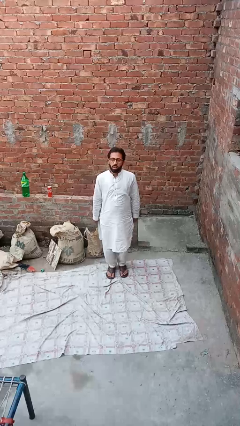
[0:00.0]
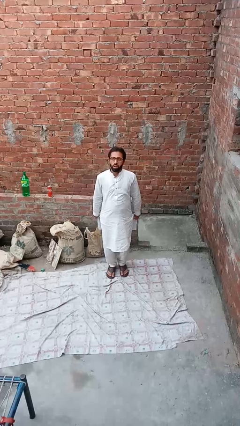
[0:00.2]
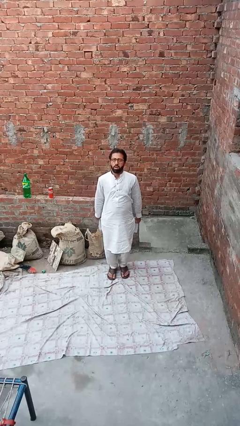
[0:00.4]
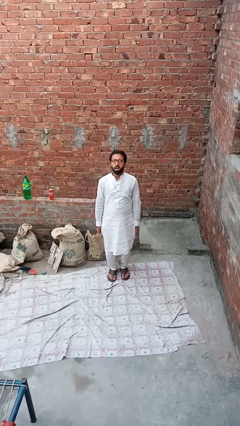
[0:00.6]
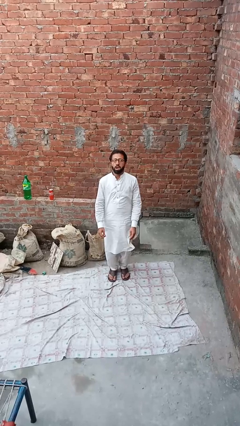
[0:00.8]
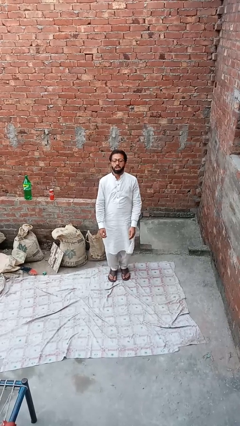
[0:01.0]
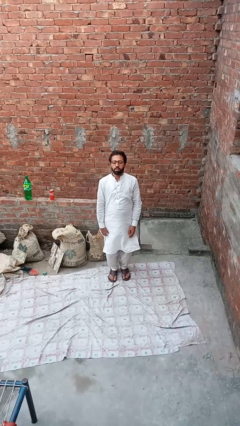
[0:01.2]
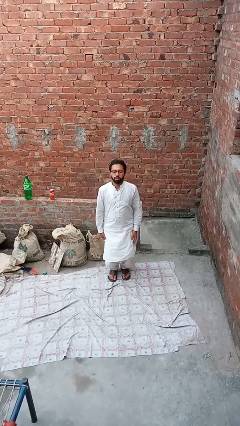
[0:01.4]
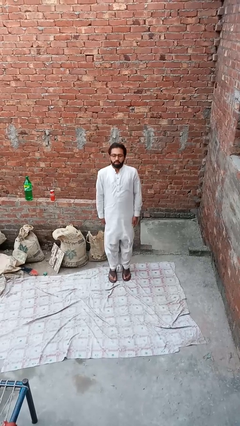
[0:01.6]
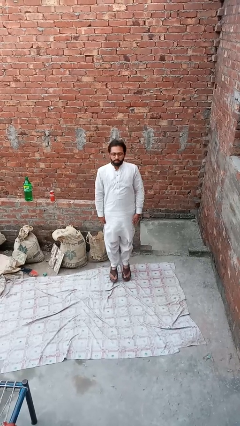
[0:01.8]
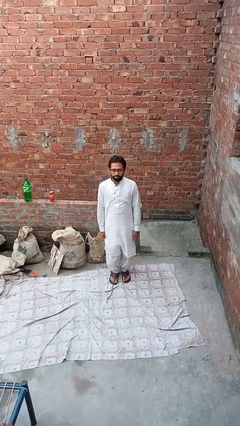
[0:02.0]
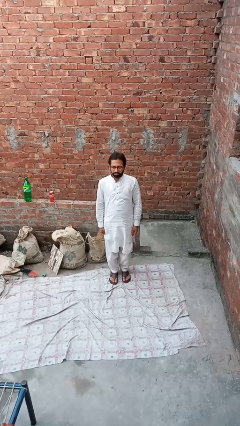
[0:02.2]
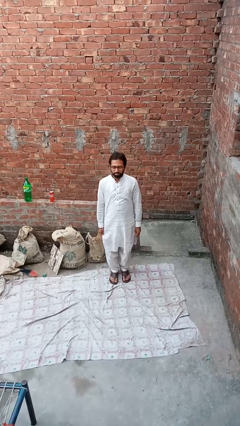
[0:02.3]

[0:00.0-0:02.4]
person exercises with jumping jacks

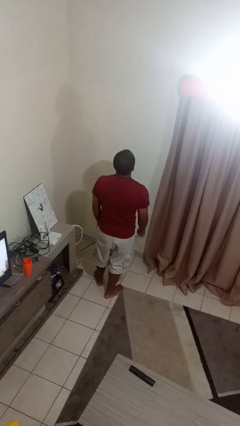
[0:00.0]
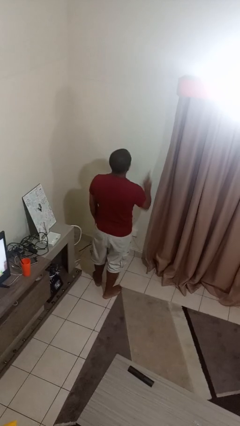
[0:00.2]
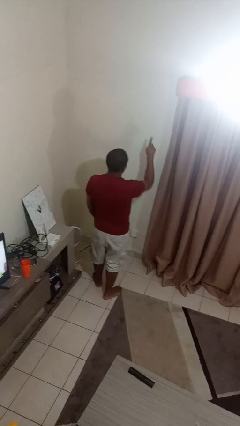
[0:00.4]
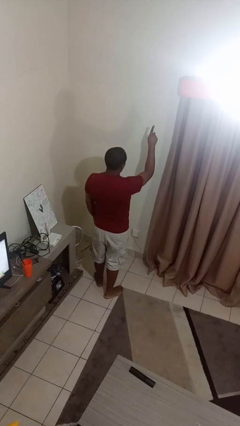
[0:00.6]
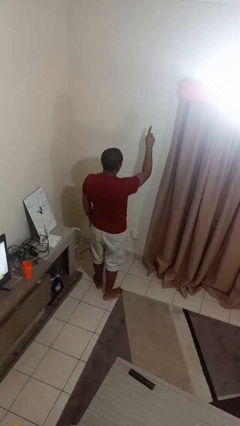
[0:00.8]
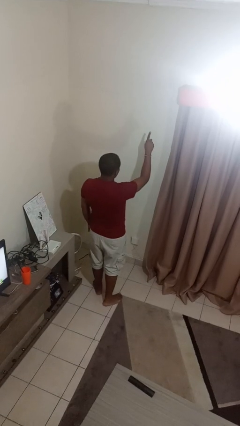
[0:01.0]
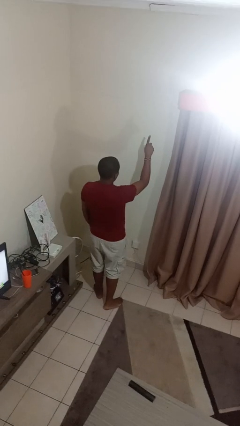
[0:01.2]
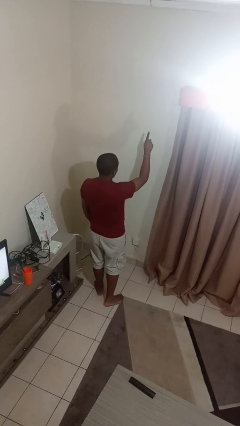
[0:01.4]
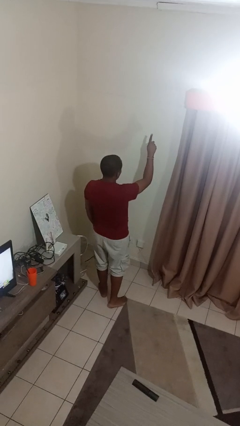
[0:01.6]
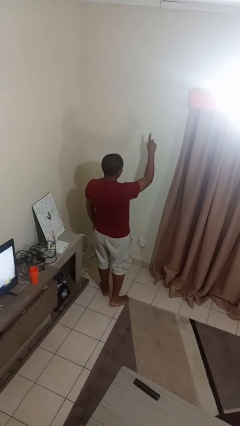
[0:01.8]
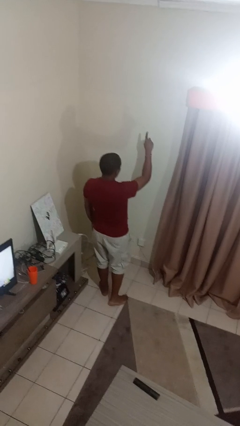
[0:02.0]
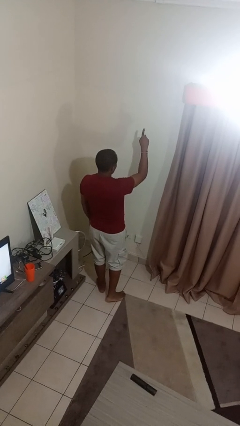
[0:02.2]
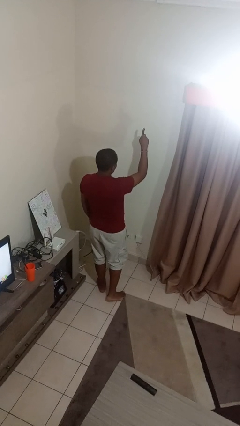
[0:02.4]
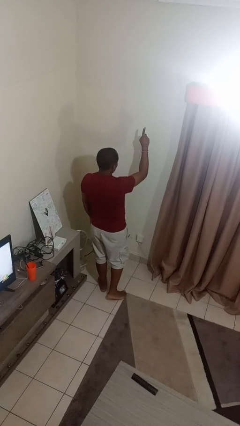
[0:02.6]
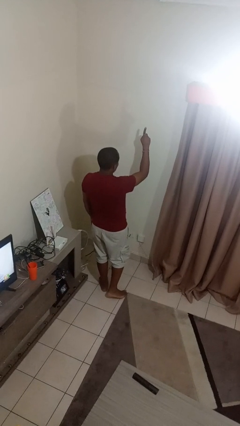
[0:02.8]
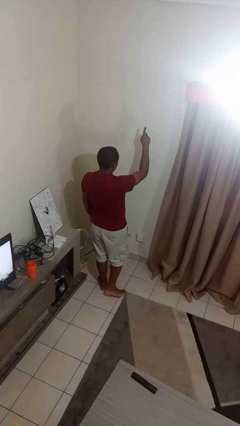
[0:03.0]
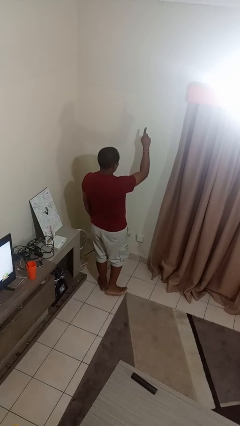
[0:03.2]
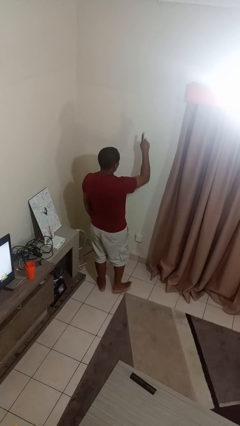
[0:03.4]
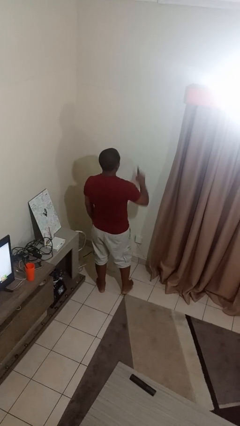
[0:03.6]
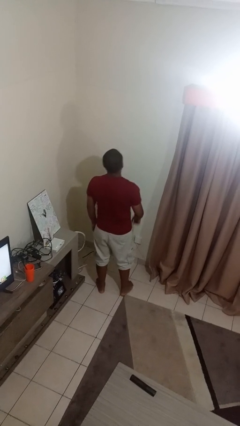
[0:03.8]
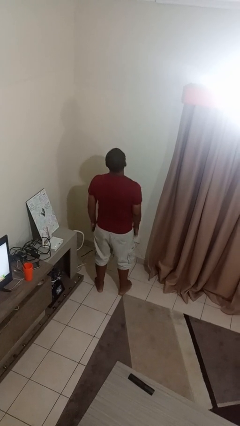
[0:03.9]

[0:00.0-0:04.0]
person gestures number one

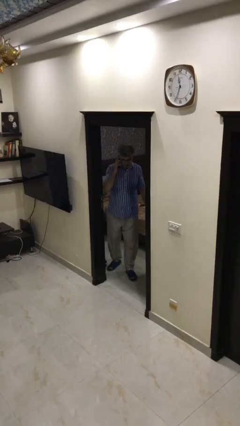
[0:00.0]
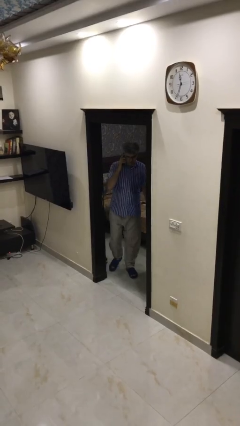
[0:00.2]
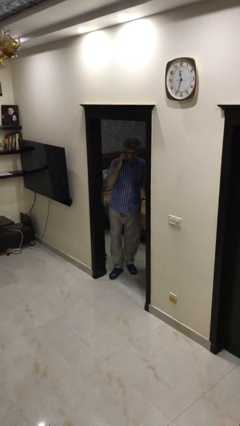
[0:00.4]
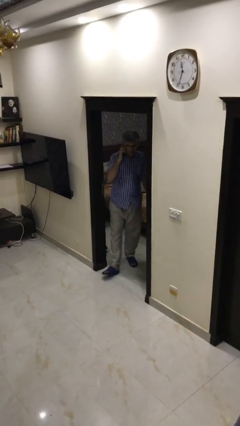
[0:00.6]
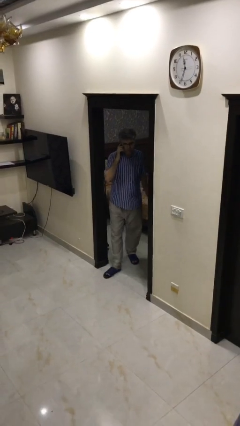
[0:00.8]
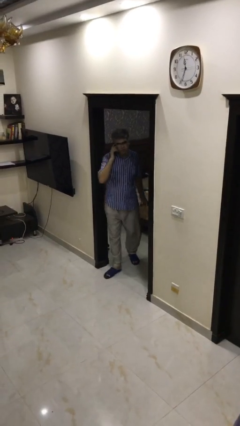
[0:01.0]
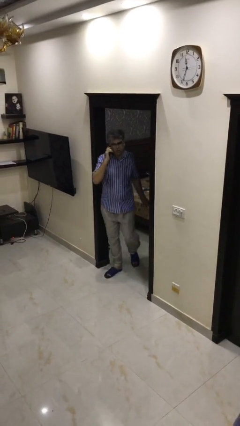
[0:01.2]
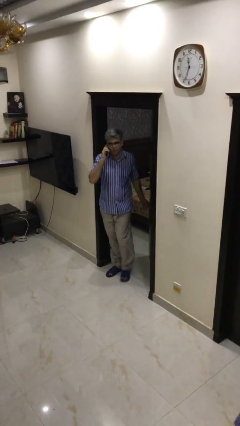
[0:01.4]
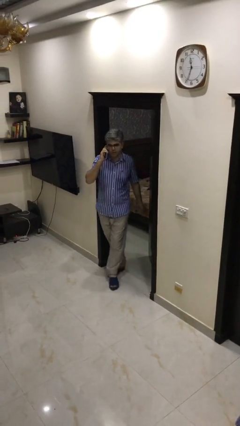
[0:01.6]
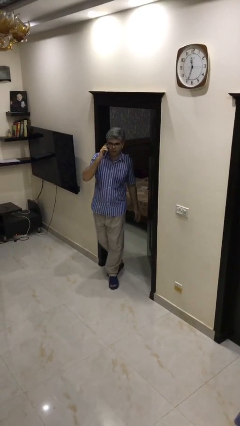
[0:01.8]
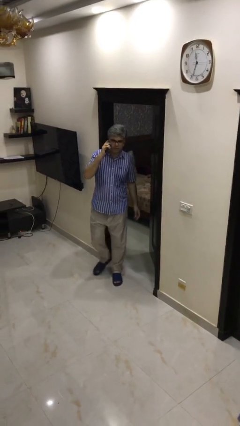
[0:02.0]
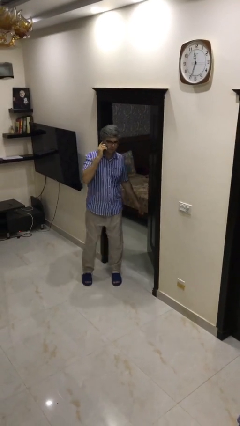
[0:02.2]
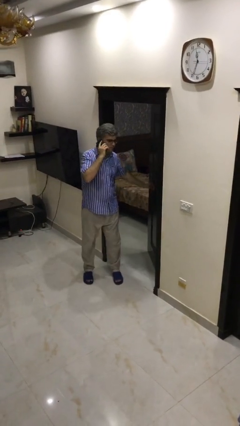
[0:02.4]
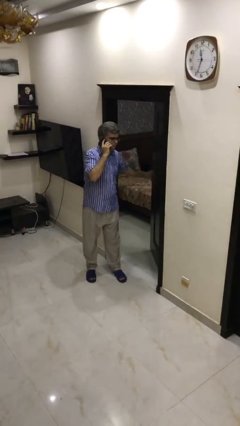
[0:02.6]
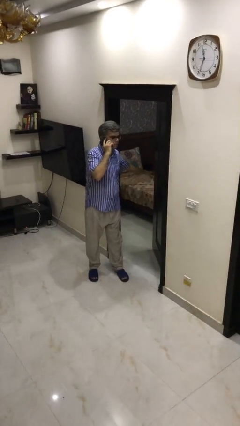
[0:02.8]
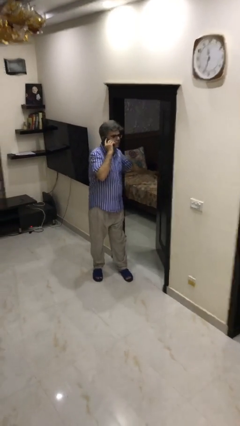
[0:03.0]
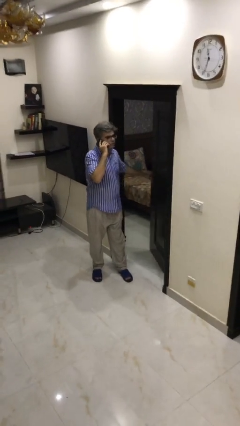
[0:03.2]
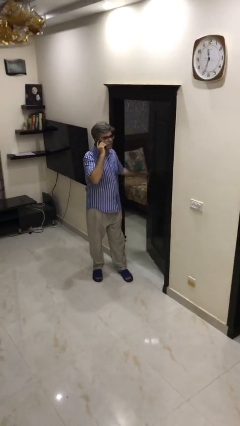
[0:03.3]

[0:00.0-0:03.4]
person enters scene through structure

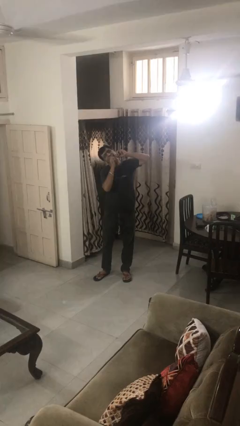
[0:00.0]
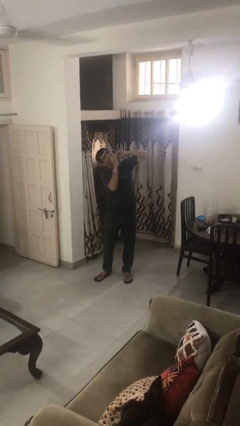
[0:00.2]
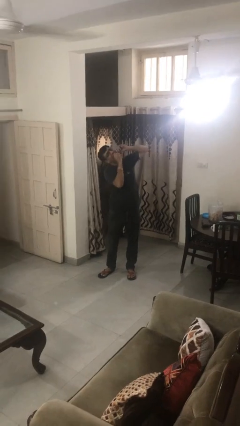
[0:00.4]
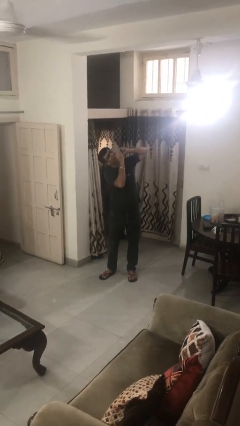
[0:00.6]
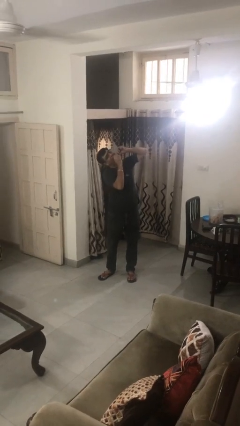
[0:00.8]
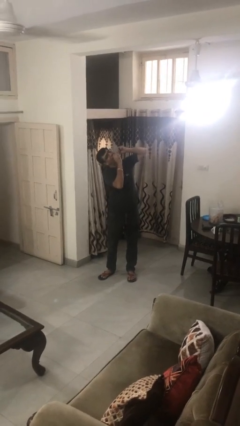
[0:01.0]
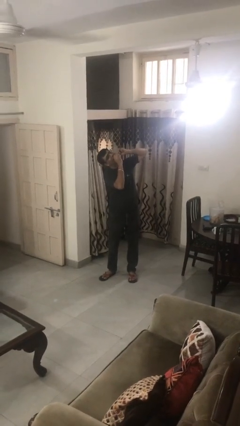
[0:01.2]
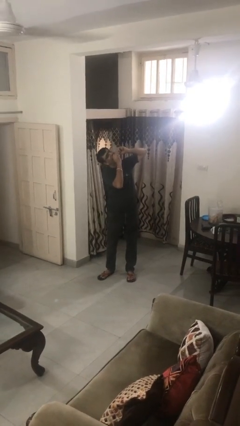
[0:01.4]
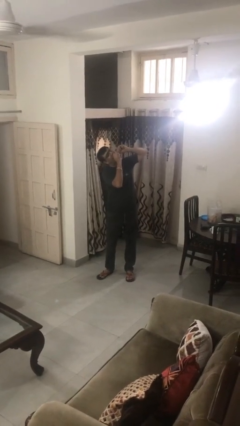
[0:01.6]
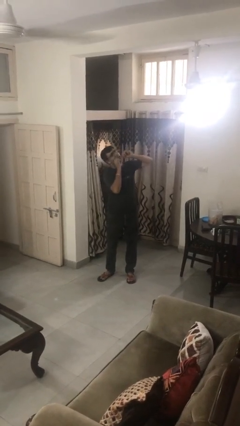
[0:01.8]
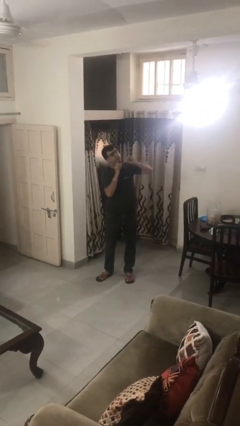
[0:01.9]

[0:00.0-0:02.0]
person flosses

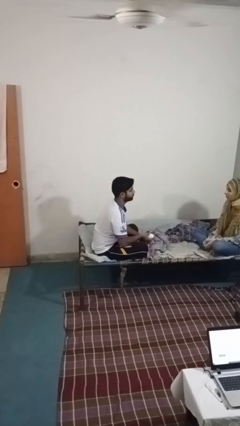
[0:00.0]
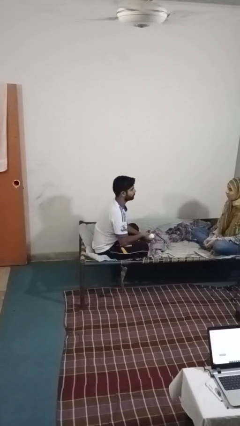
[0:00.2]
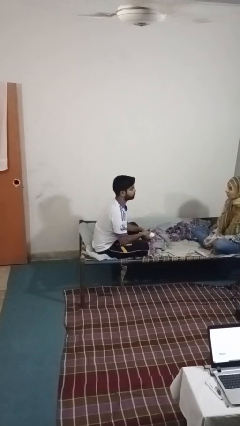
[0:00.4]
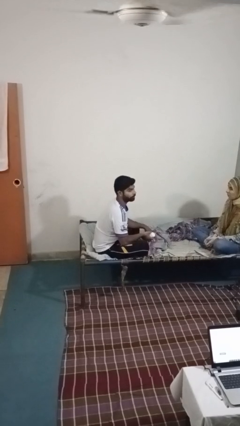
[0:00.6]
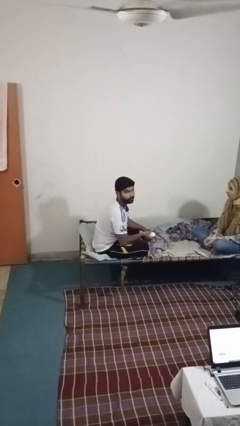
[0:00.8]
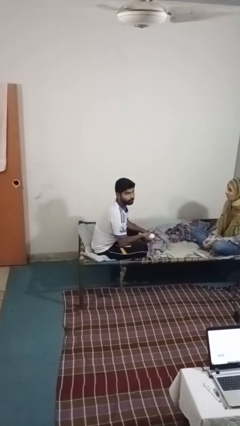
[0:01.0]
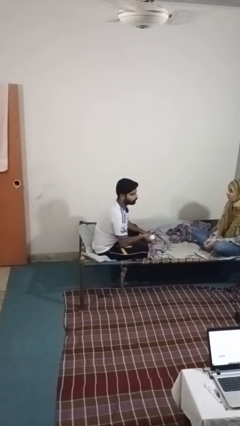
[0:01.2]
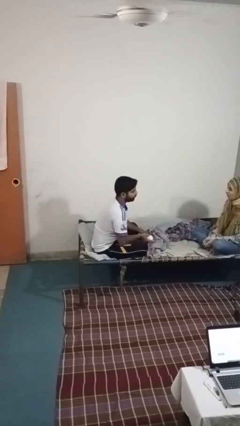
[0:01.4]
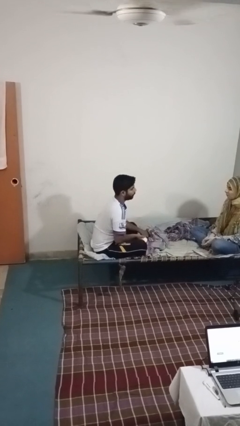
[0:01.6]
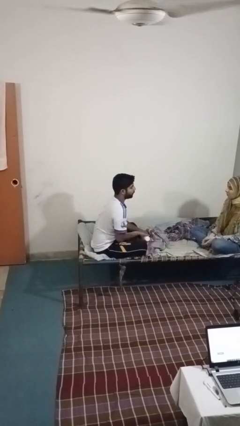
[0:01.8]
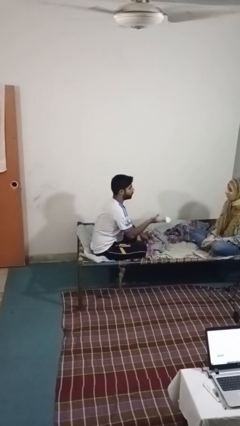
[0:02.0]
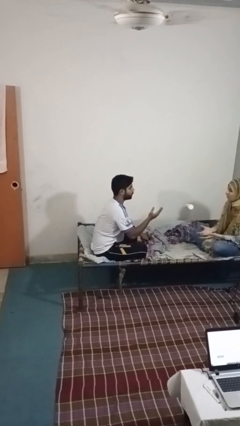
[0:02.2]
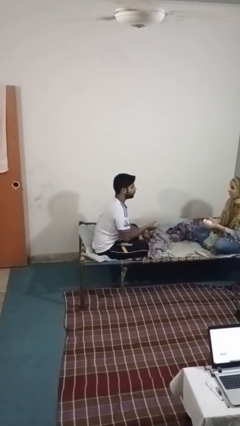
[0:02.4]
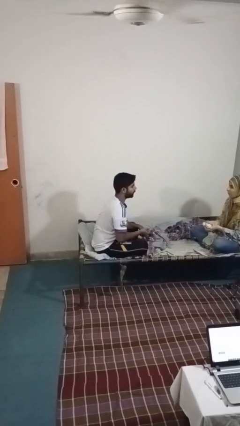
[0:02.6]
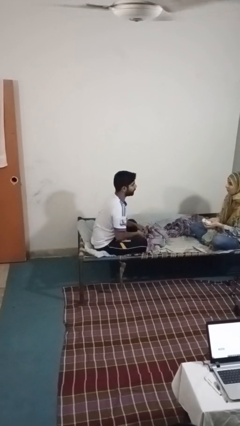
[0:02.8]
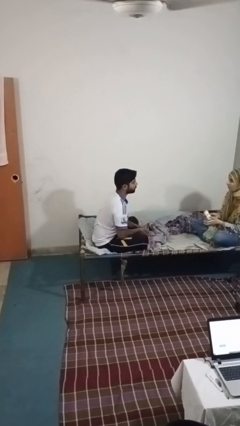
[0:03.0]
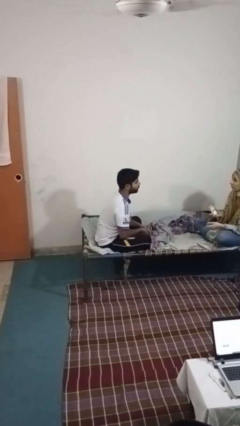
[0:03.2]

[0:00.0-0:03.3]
person throws object to person

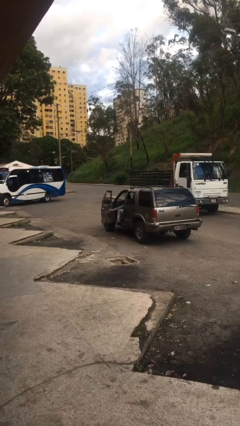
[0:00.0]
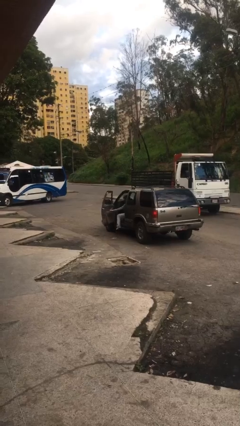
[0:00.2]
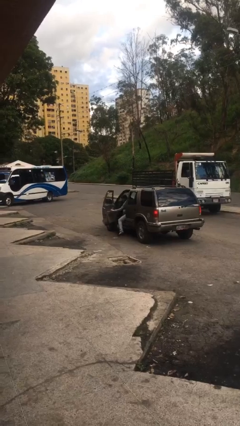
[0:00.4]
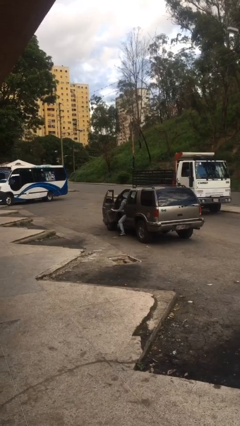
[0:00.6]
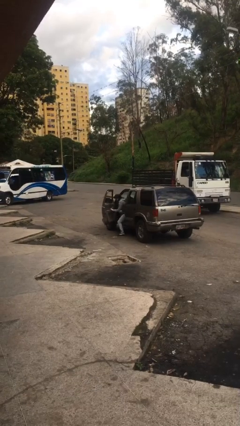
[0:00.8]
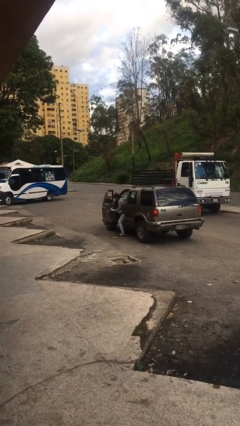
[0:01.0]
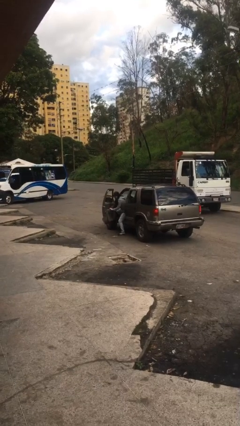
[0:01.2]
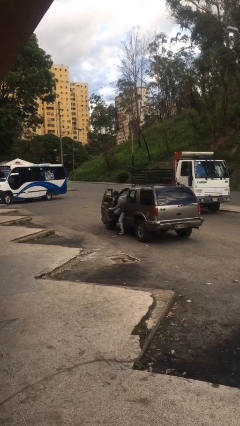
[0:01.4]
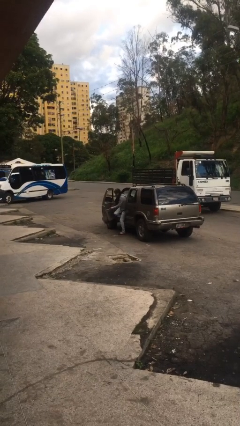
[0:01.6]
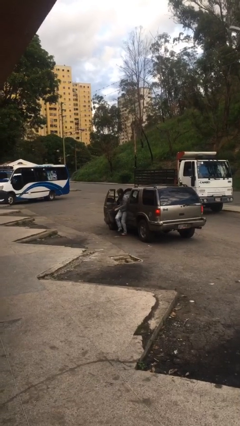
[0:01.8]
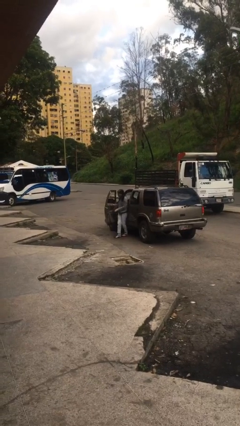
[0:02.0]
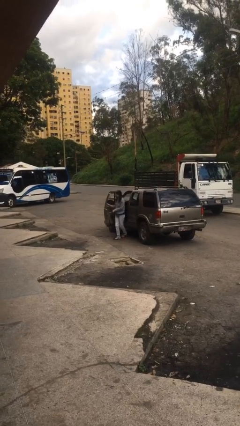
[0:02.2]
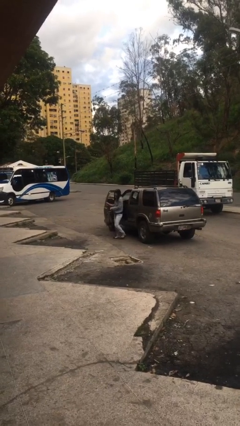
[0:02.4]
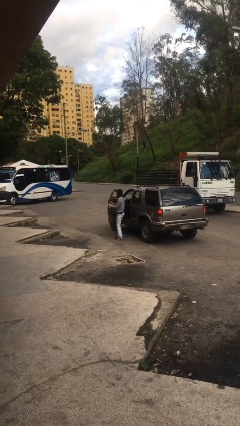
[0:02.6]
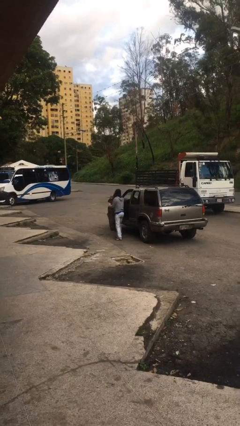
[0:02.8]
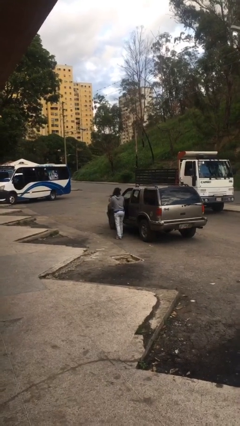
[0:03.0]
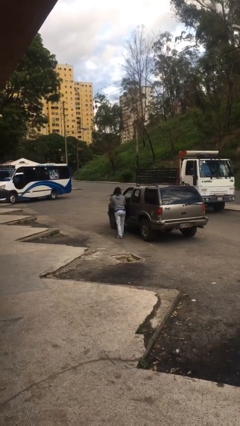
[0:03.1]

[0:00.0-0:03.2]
person exits car
